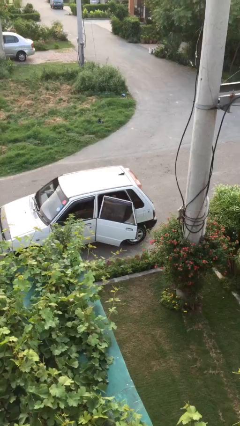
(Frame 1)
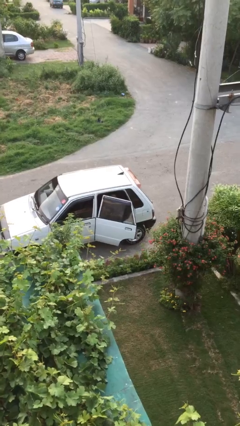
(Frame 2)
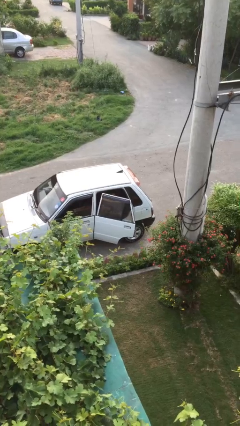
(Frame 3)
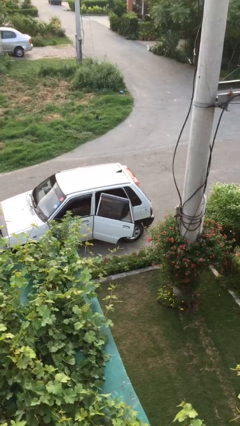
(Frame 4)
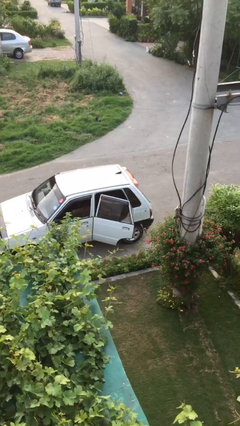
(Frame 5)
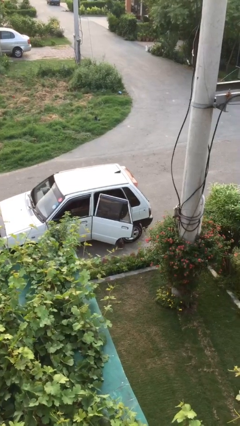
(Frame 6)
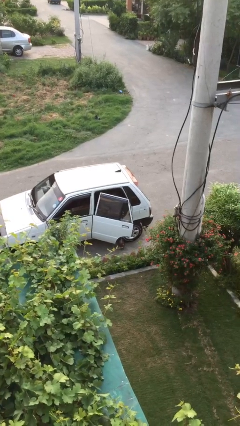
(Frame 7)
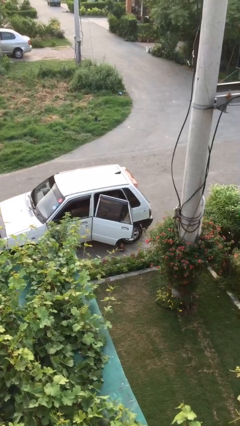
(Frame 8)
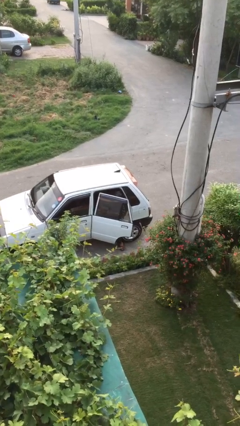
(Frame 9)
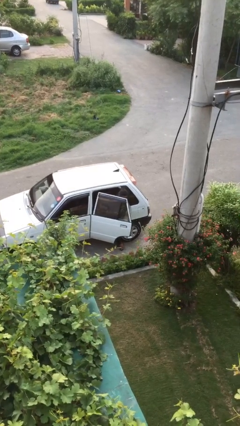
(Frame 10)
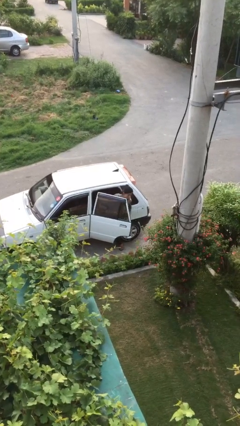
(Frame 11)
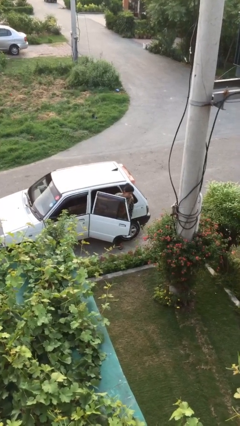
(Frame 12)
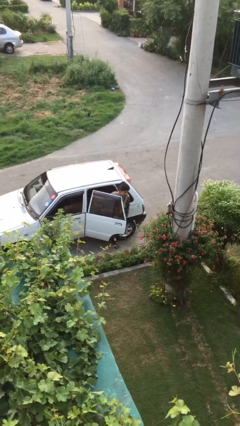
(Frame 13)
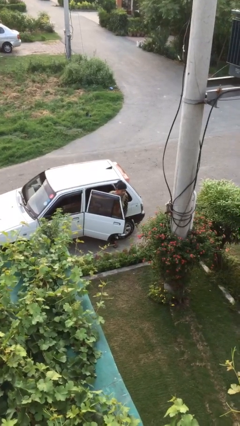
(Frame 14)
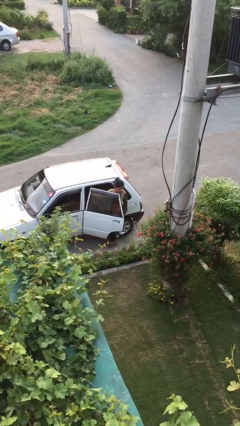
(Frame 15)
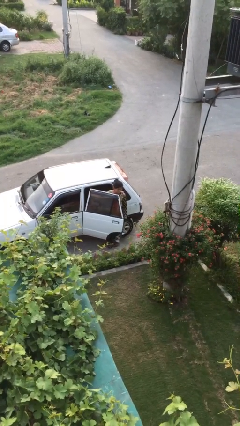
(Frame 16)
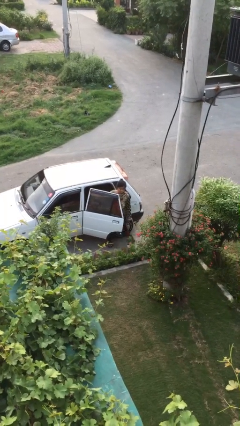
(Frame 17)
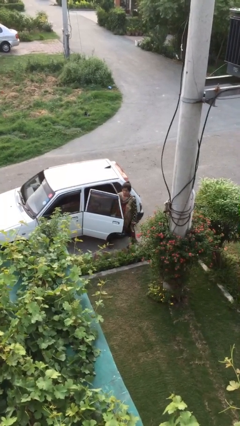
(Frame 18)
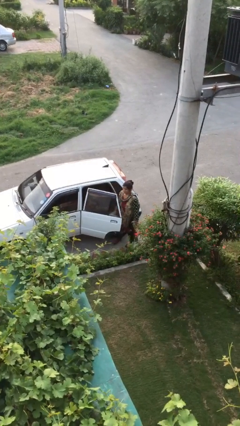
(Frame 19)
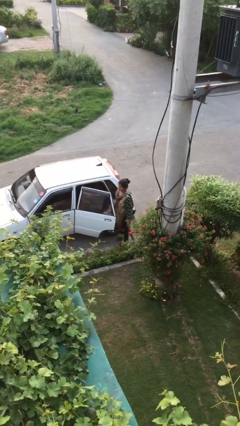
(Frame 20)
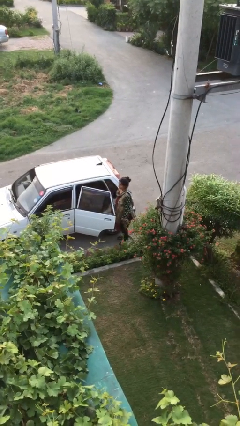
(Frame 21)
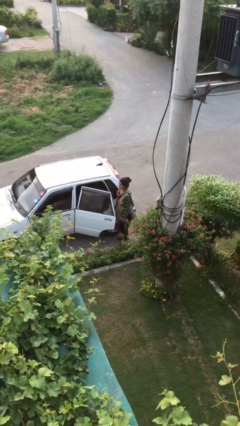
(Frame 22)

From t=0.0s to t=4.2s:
person exits car

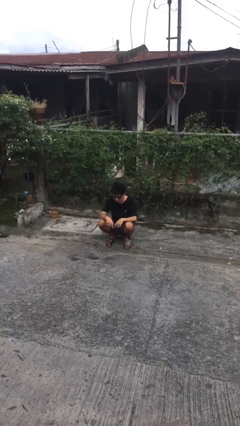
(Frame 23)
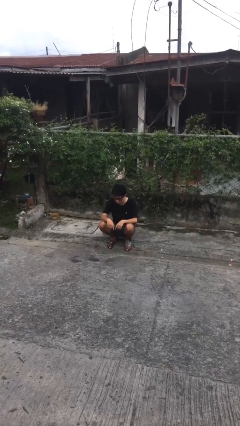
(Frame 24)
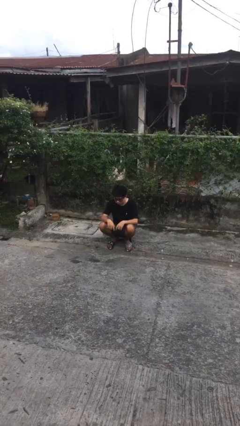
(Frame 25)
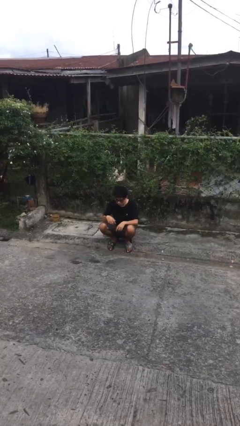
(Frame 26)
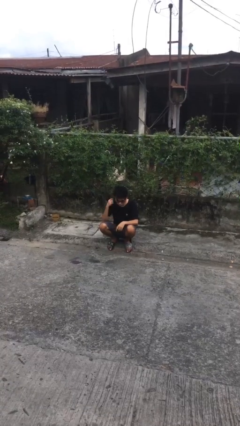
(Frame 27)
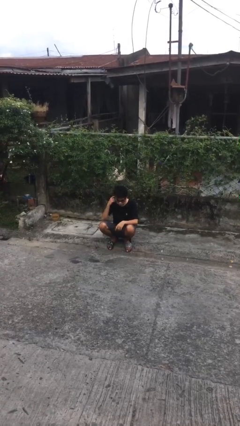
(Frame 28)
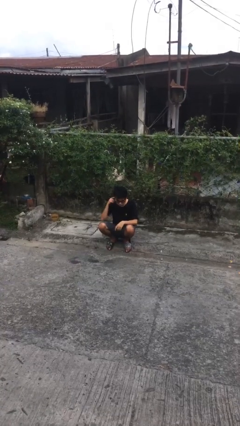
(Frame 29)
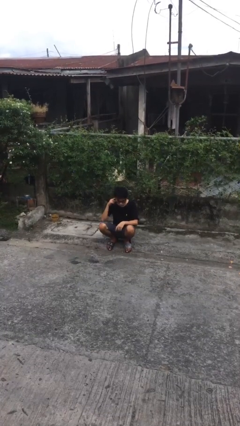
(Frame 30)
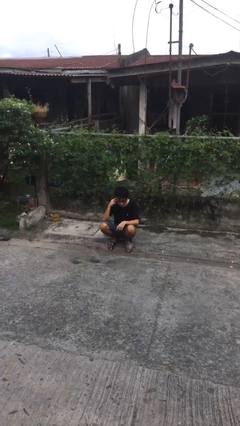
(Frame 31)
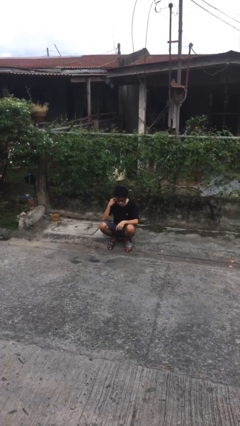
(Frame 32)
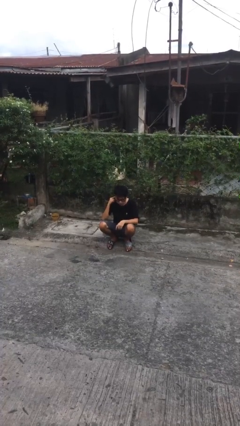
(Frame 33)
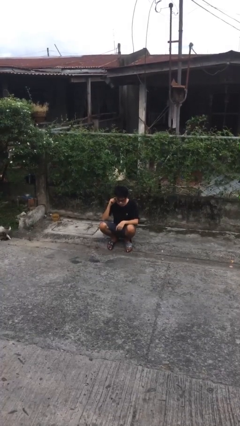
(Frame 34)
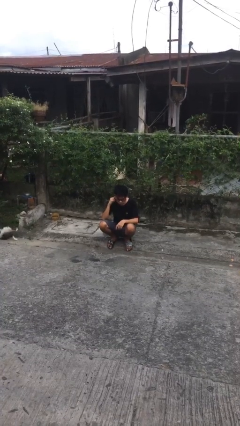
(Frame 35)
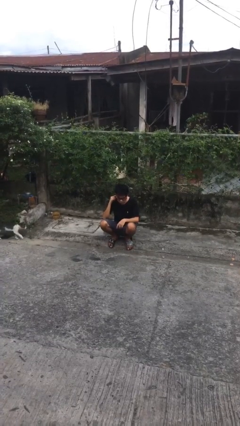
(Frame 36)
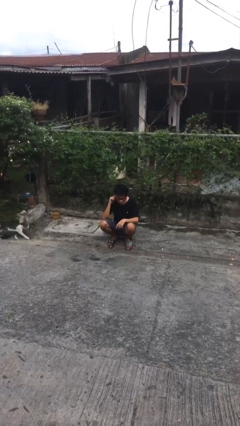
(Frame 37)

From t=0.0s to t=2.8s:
person touches earlobe

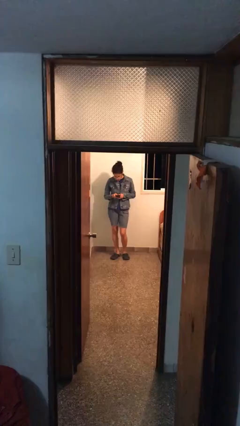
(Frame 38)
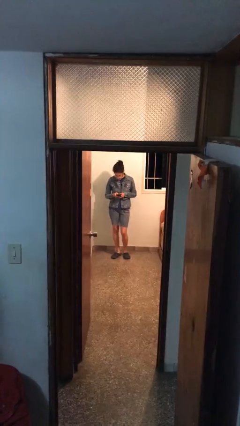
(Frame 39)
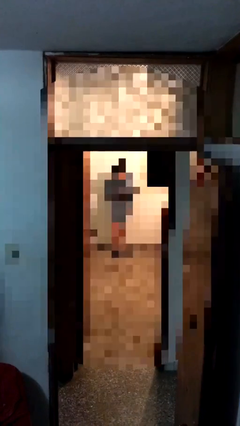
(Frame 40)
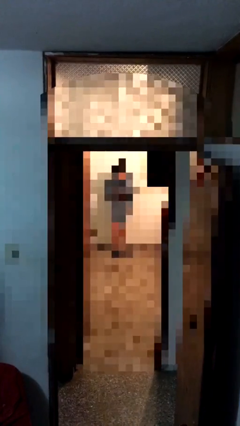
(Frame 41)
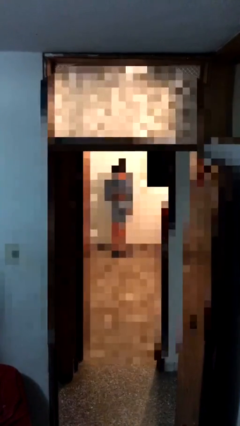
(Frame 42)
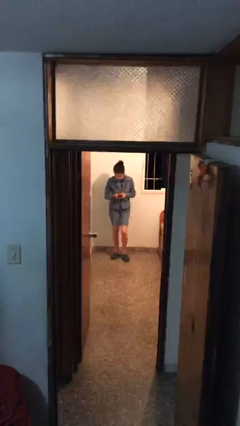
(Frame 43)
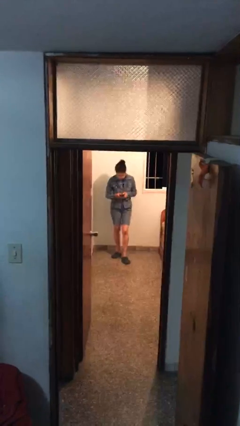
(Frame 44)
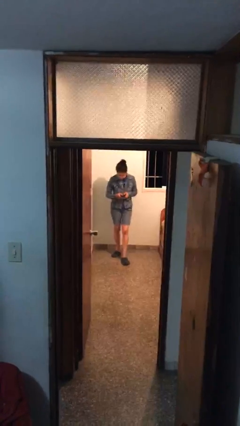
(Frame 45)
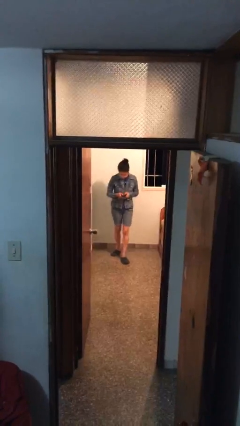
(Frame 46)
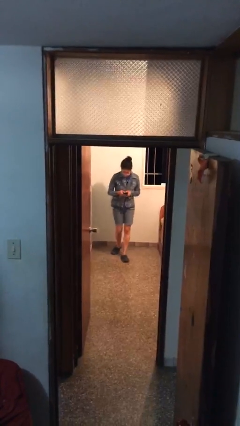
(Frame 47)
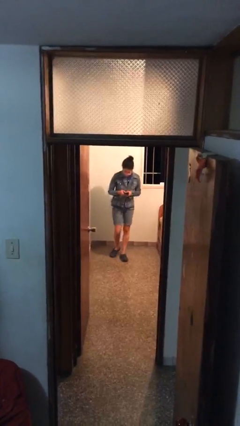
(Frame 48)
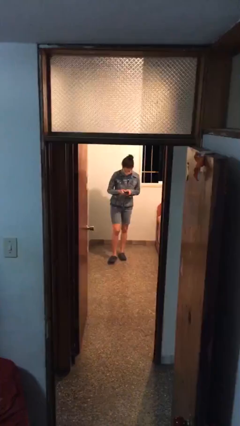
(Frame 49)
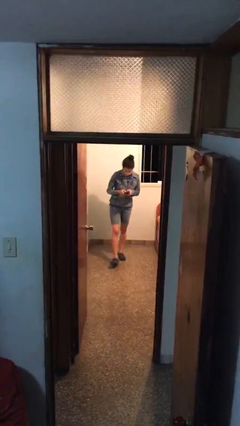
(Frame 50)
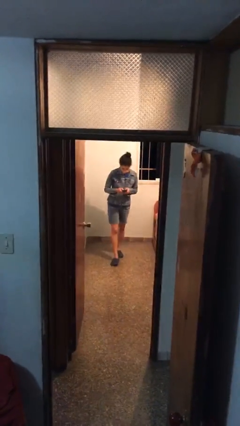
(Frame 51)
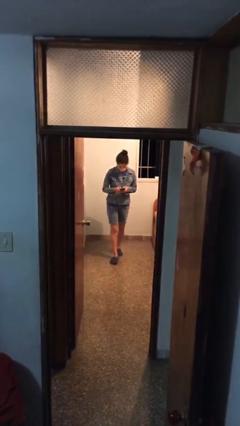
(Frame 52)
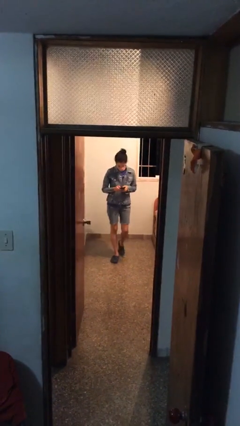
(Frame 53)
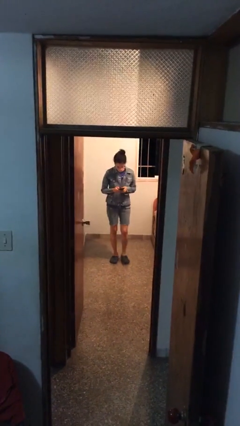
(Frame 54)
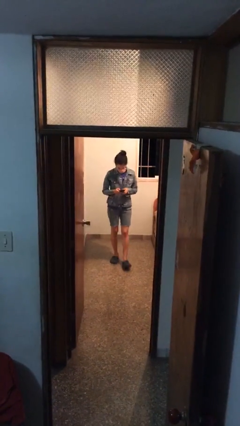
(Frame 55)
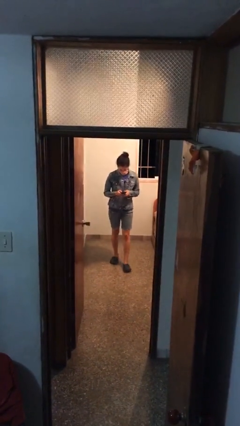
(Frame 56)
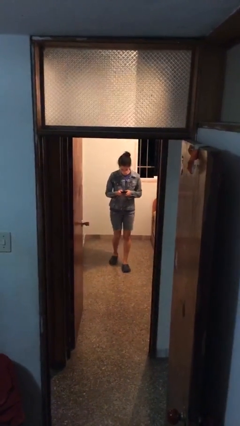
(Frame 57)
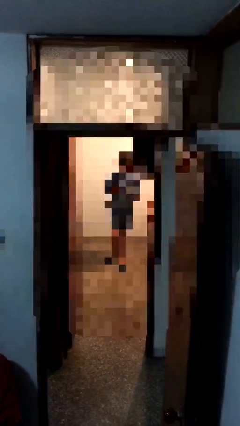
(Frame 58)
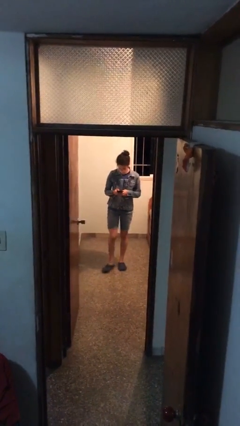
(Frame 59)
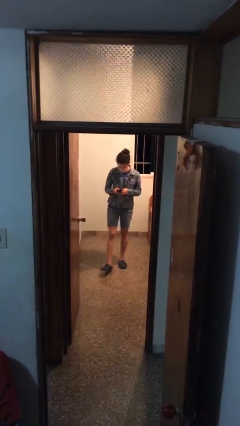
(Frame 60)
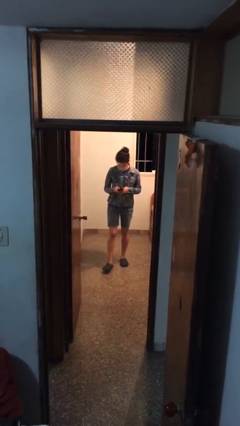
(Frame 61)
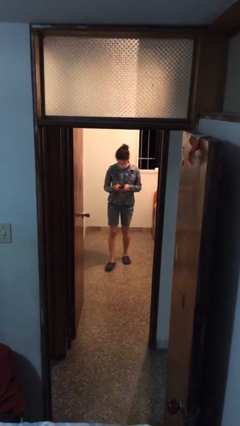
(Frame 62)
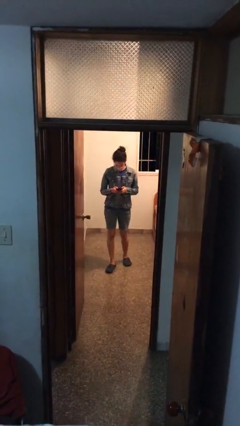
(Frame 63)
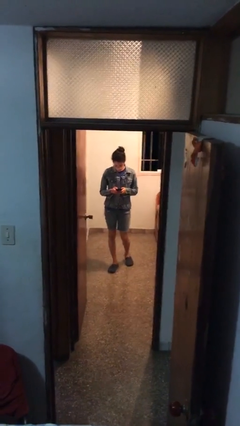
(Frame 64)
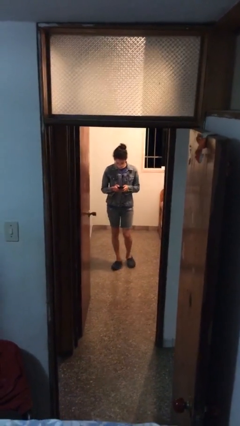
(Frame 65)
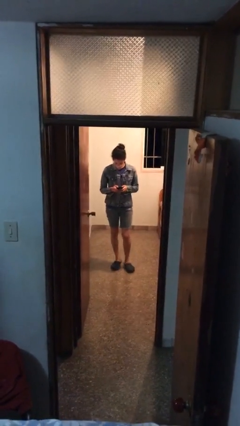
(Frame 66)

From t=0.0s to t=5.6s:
person texts on phone

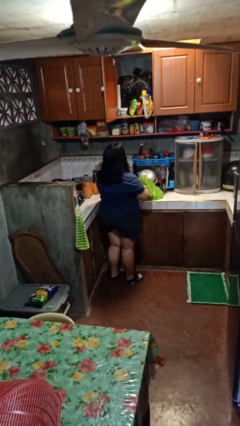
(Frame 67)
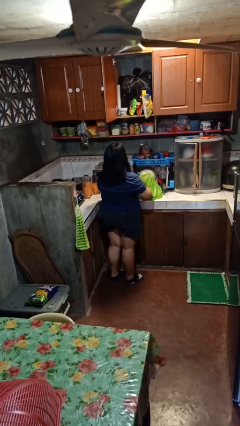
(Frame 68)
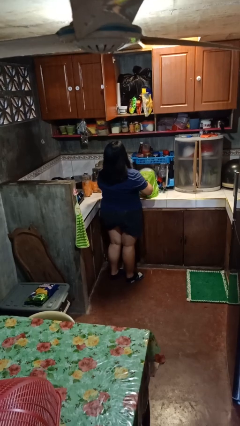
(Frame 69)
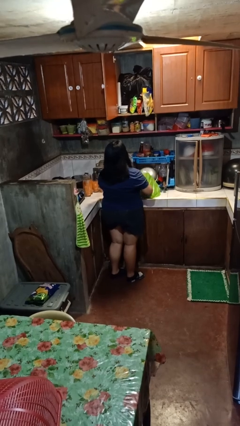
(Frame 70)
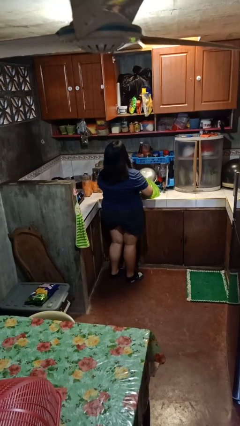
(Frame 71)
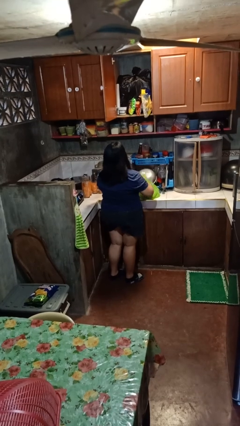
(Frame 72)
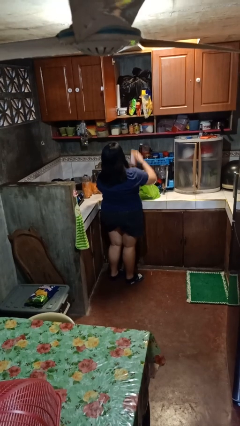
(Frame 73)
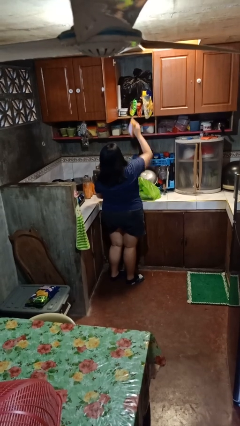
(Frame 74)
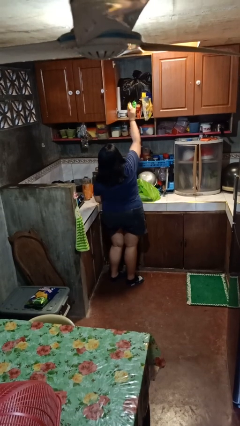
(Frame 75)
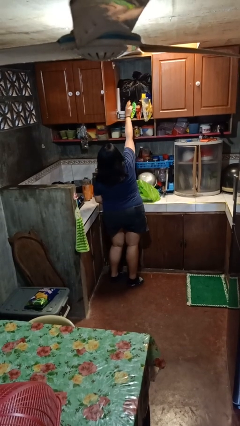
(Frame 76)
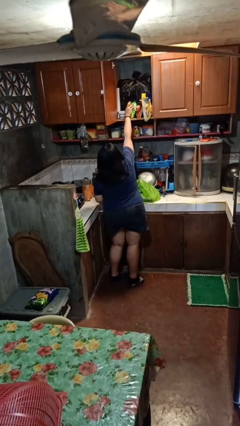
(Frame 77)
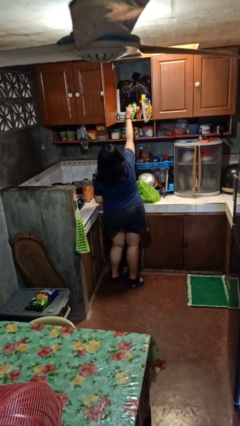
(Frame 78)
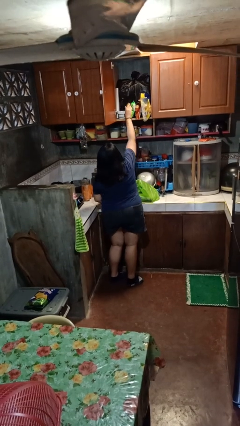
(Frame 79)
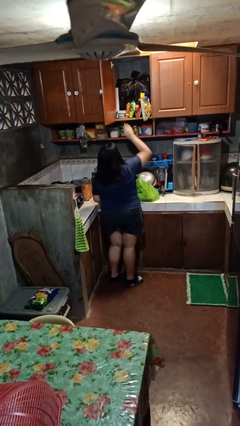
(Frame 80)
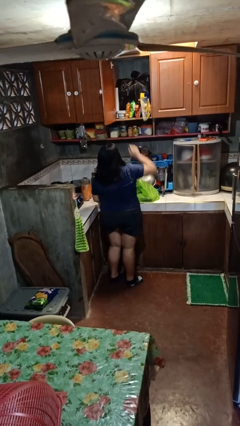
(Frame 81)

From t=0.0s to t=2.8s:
person loads groceries into cabinet

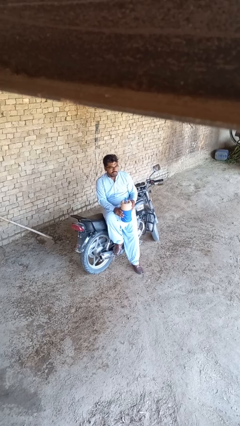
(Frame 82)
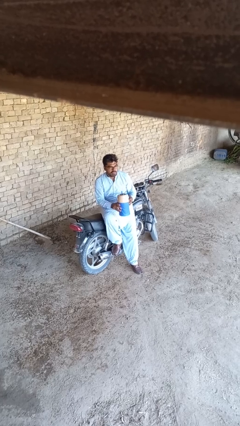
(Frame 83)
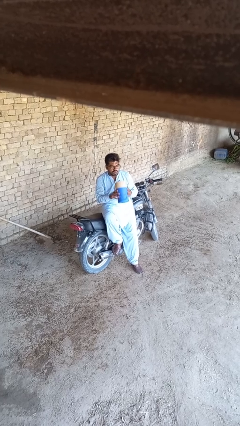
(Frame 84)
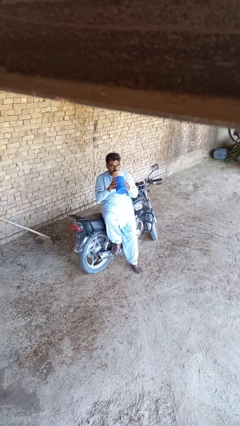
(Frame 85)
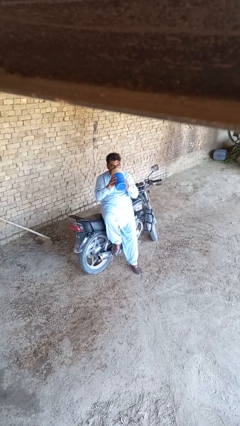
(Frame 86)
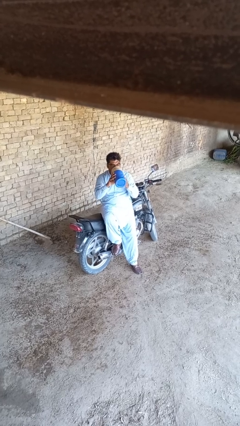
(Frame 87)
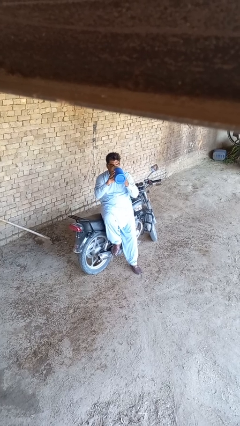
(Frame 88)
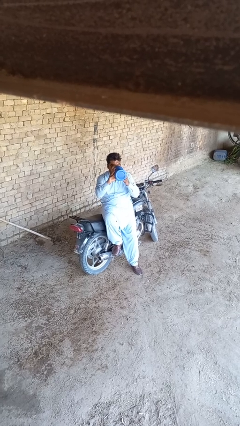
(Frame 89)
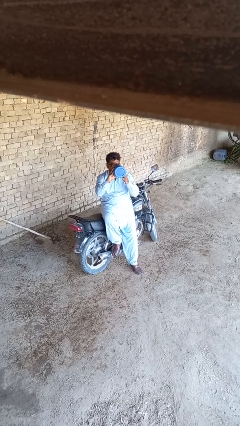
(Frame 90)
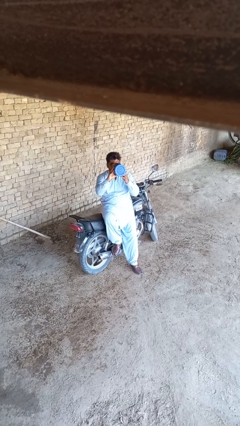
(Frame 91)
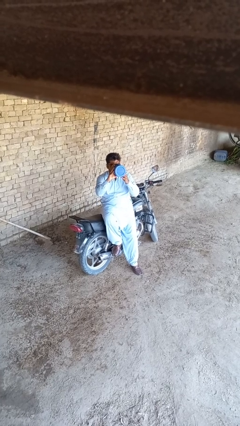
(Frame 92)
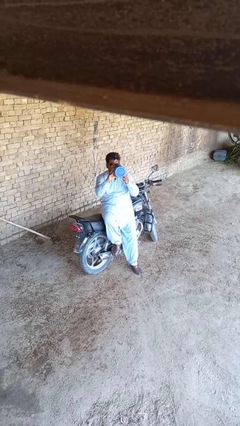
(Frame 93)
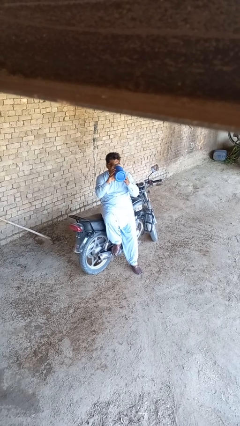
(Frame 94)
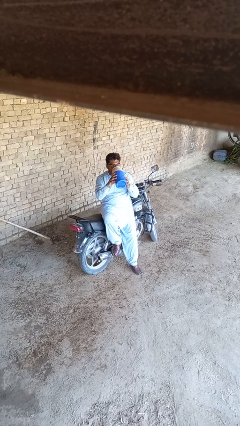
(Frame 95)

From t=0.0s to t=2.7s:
person drinks from bottle
